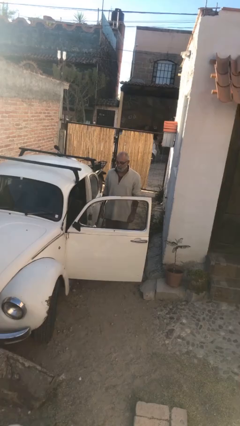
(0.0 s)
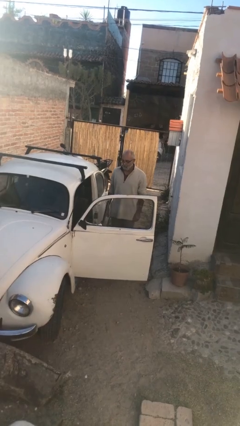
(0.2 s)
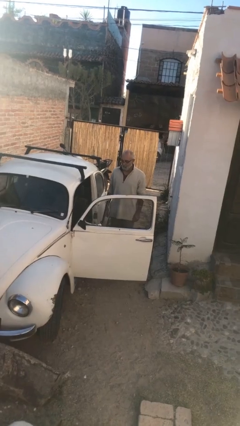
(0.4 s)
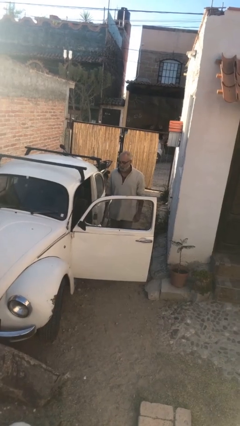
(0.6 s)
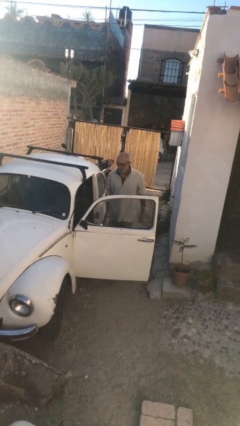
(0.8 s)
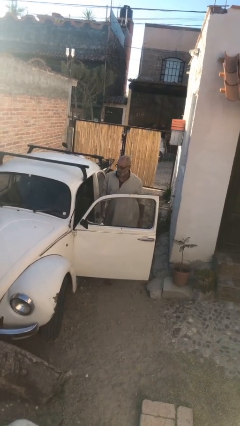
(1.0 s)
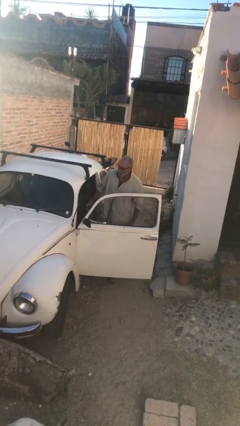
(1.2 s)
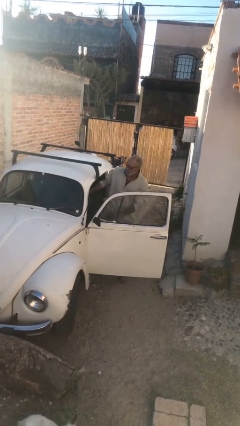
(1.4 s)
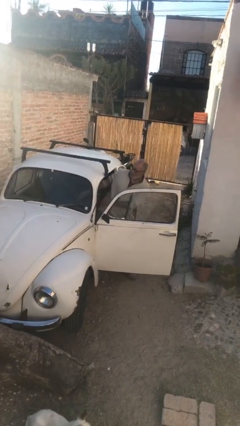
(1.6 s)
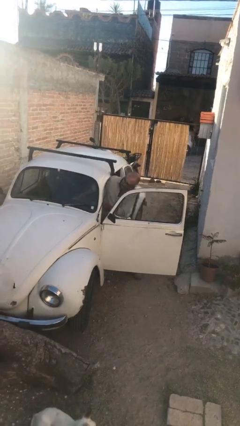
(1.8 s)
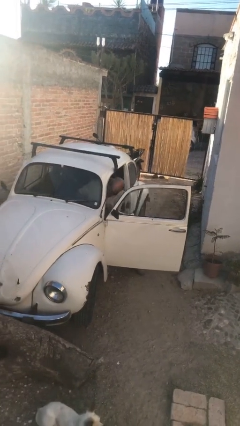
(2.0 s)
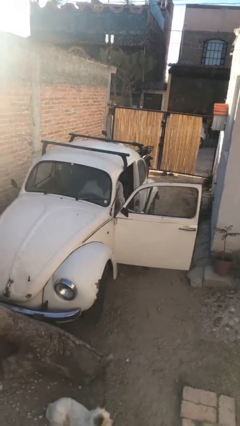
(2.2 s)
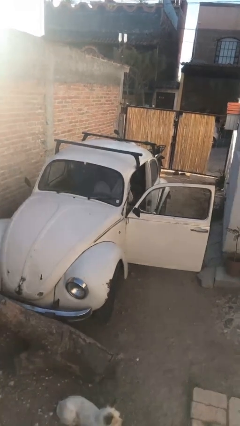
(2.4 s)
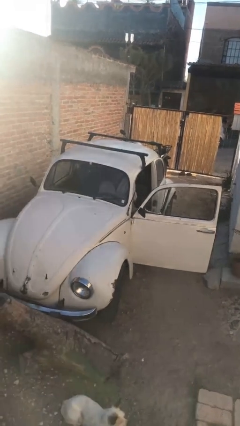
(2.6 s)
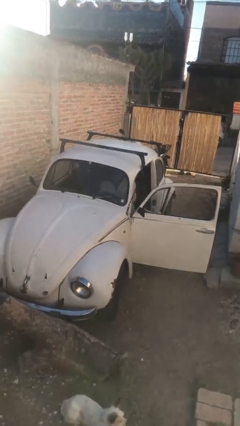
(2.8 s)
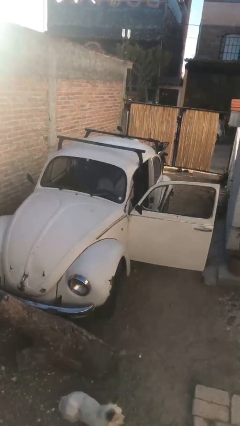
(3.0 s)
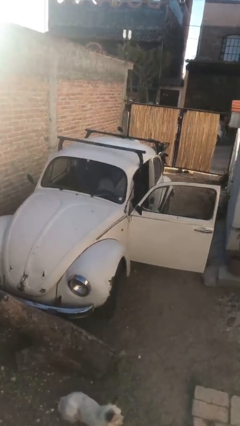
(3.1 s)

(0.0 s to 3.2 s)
person enters car

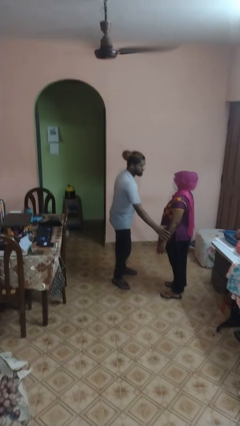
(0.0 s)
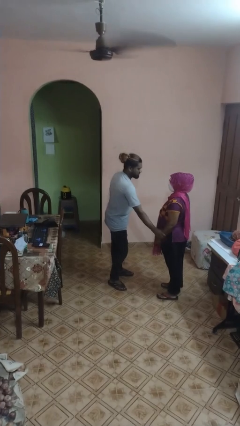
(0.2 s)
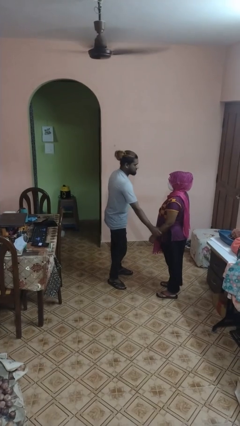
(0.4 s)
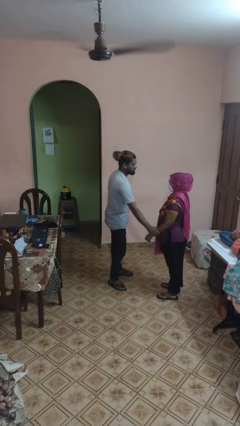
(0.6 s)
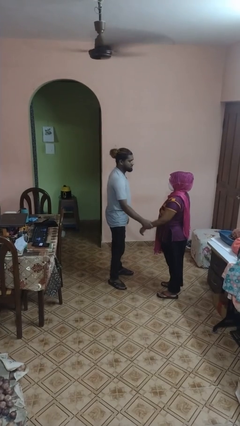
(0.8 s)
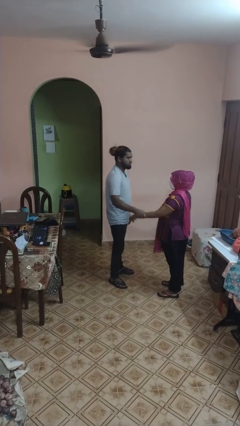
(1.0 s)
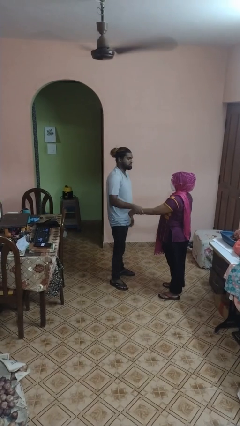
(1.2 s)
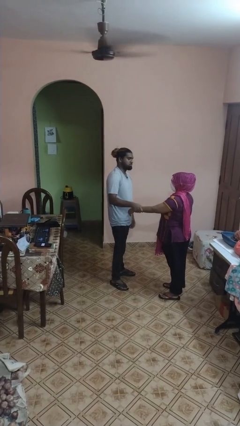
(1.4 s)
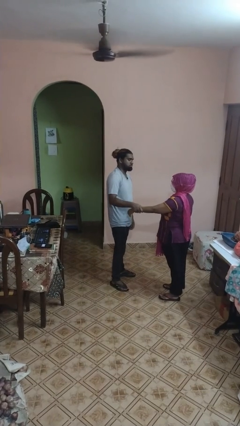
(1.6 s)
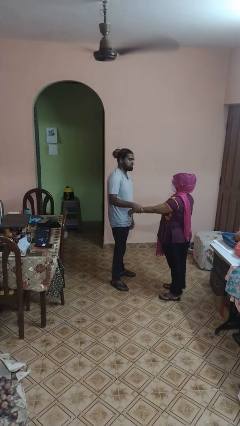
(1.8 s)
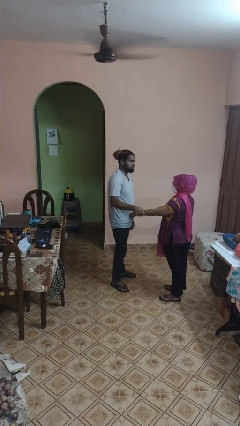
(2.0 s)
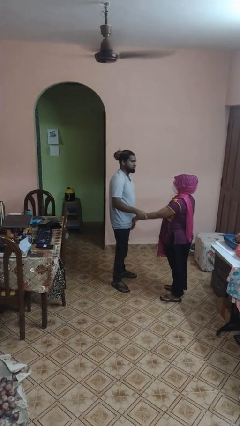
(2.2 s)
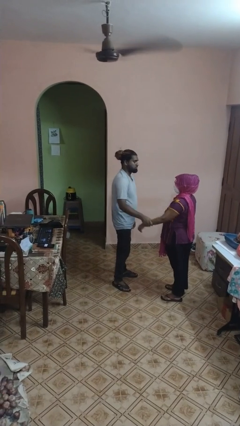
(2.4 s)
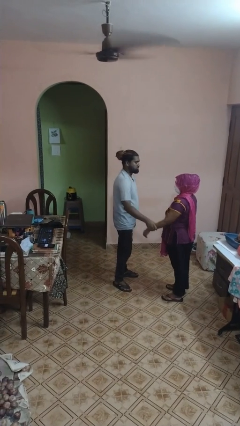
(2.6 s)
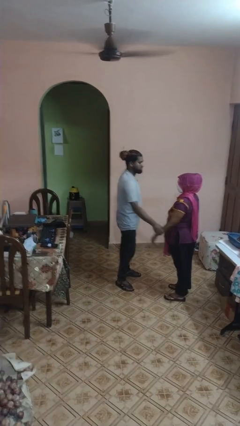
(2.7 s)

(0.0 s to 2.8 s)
person grabs person by forearm

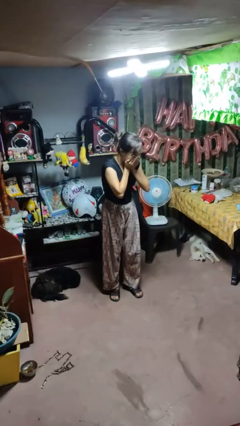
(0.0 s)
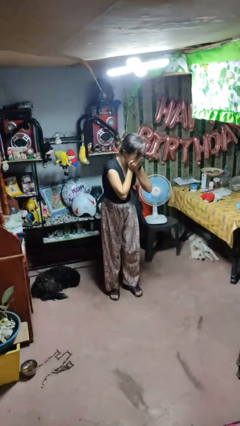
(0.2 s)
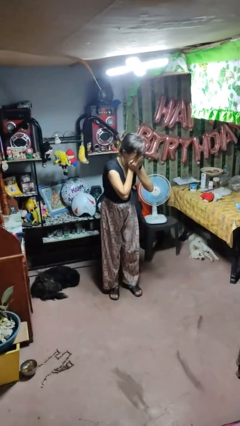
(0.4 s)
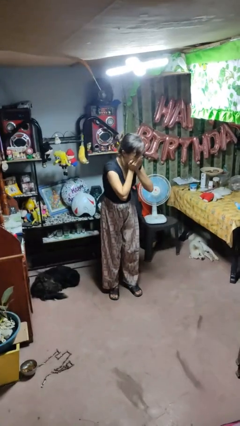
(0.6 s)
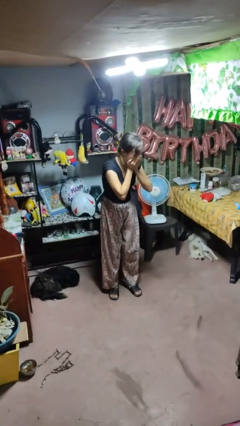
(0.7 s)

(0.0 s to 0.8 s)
person sneezes into hand

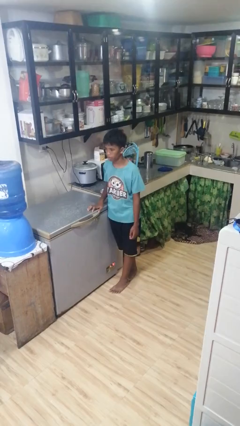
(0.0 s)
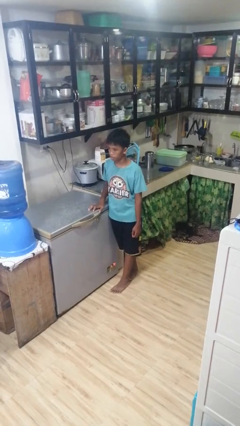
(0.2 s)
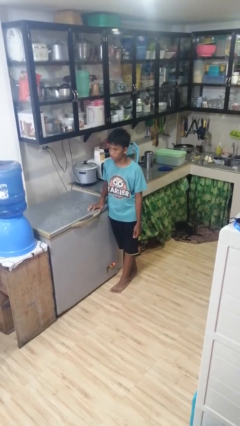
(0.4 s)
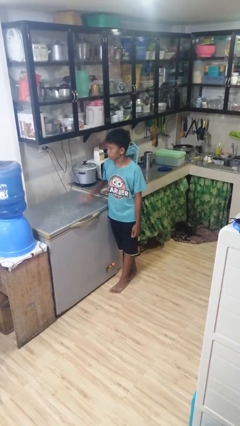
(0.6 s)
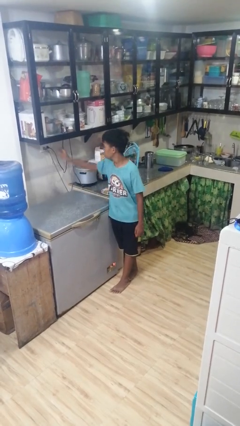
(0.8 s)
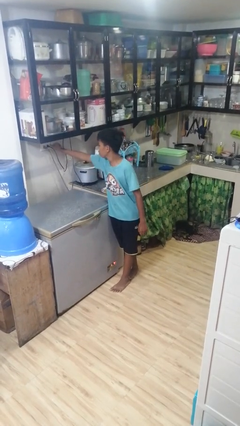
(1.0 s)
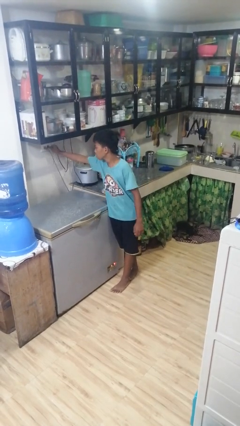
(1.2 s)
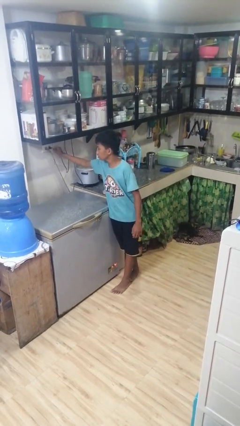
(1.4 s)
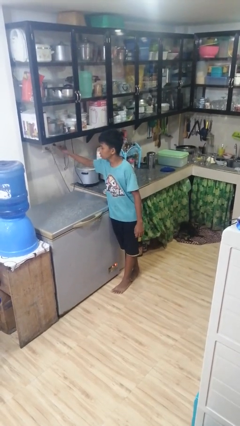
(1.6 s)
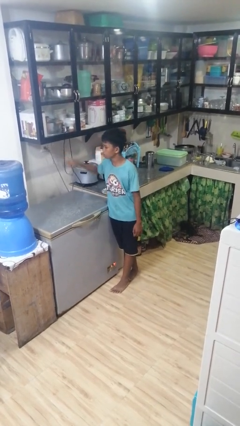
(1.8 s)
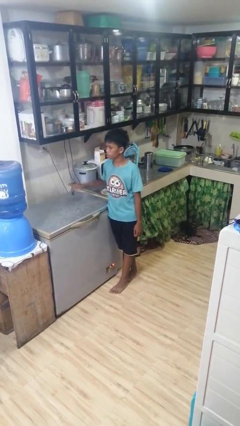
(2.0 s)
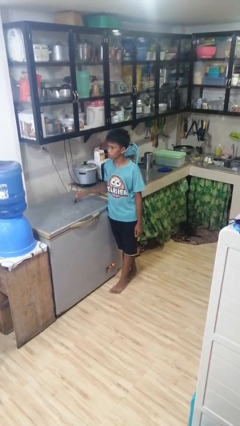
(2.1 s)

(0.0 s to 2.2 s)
person unplugs from electrical socket

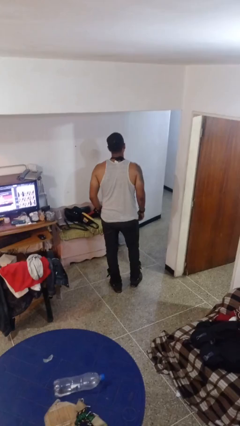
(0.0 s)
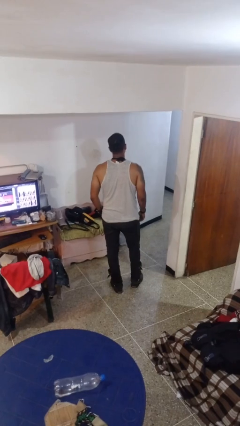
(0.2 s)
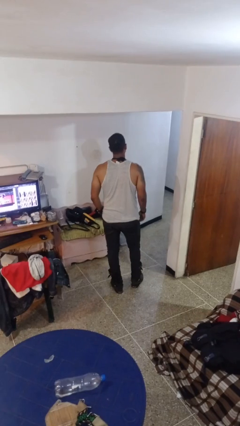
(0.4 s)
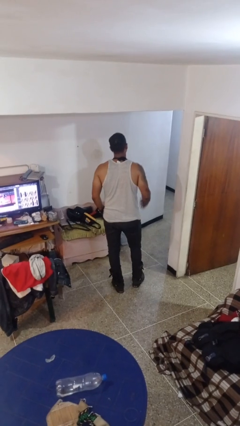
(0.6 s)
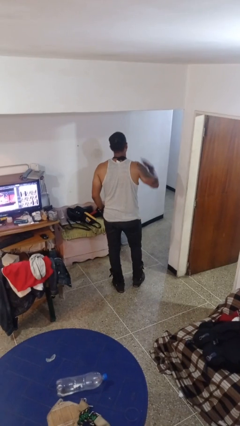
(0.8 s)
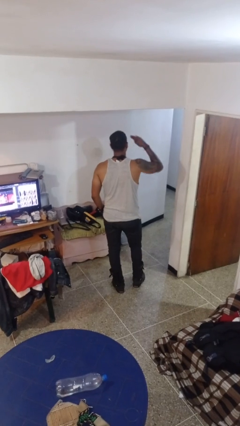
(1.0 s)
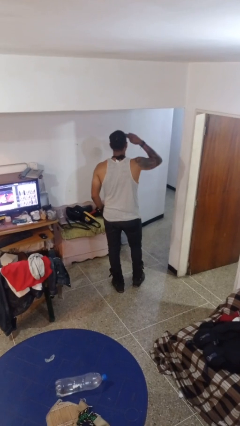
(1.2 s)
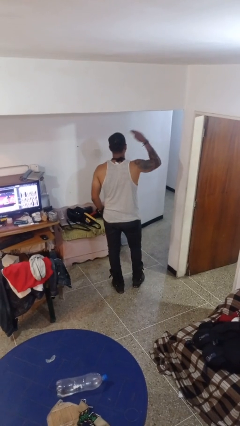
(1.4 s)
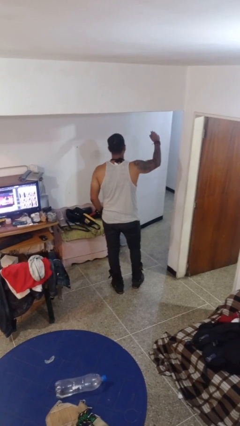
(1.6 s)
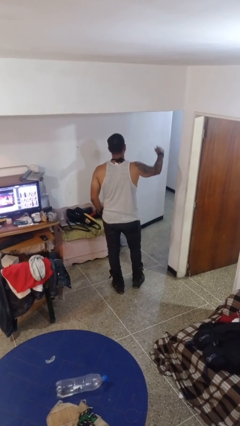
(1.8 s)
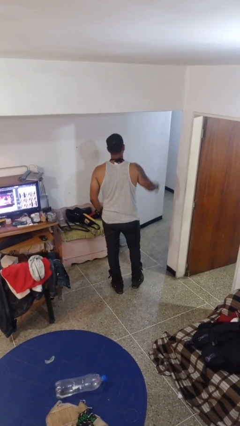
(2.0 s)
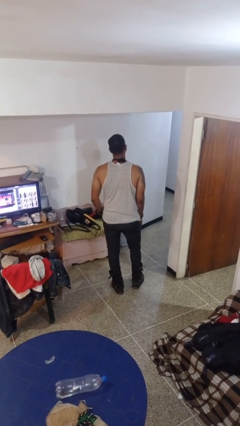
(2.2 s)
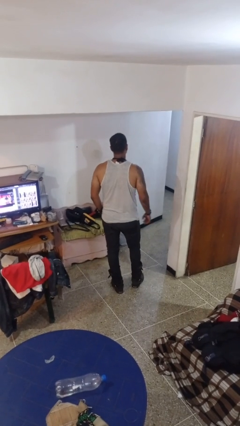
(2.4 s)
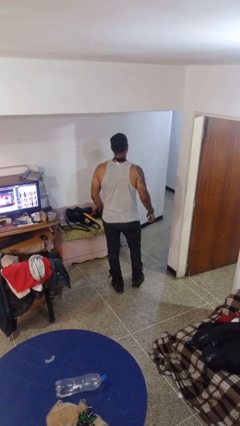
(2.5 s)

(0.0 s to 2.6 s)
person salutes

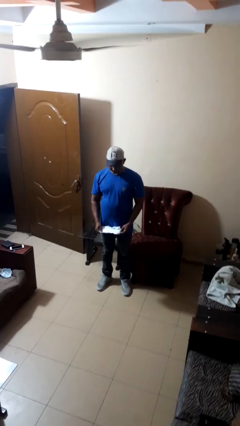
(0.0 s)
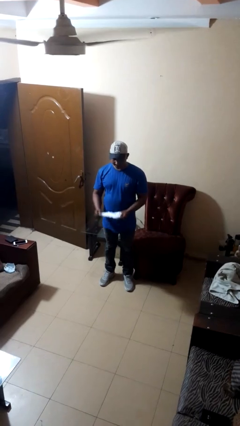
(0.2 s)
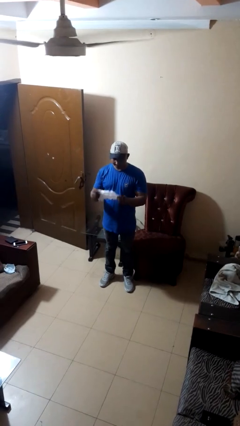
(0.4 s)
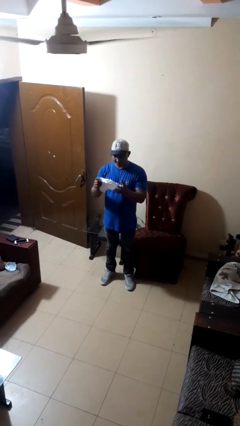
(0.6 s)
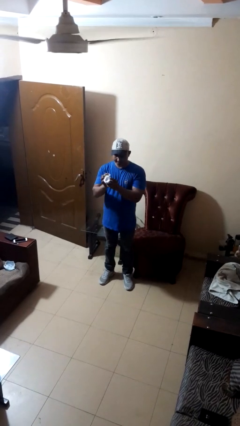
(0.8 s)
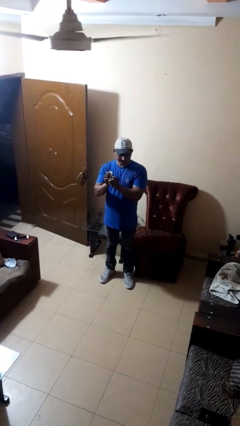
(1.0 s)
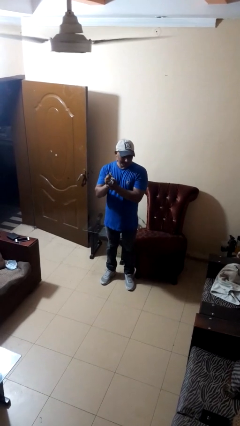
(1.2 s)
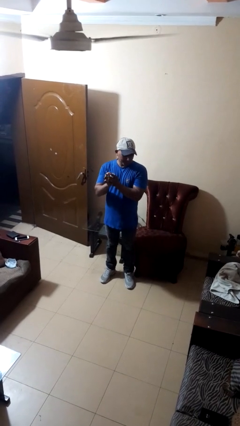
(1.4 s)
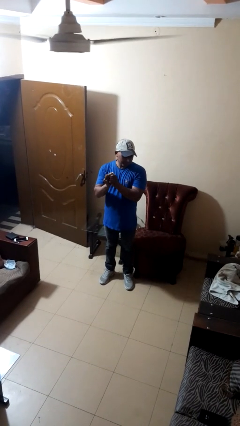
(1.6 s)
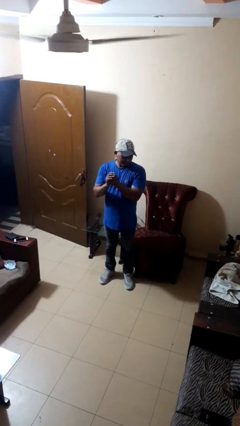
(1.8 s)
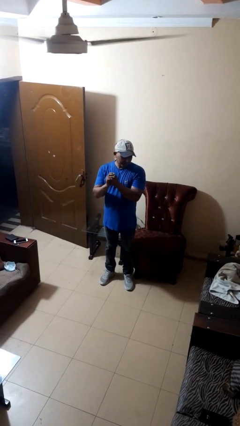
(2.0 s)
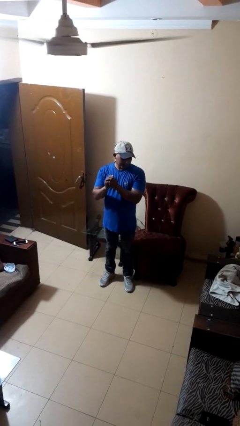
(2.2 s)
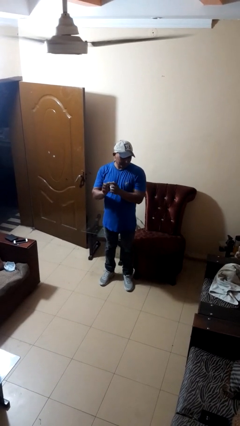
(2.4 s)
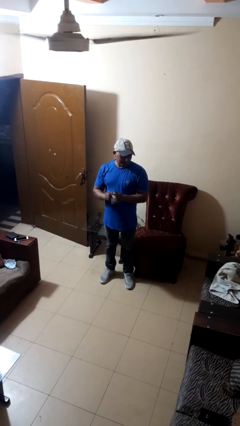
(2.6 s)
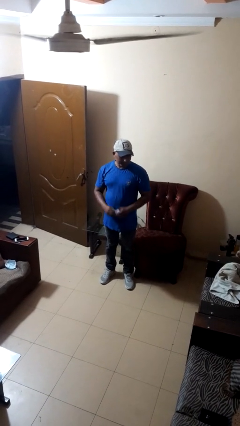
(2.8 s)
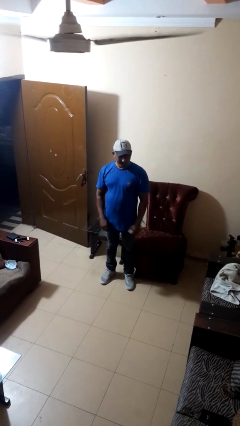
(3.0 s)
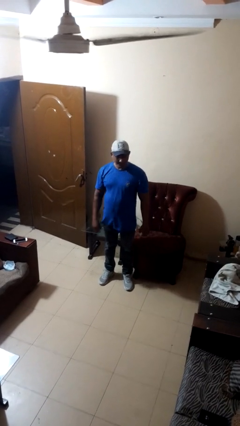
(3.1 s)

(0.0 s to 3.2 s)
person crumples paper

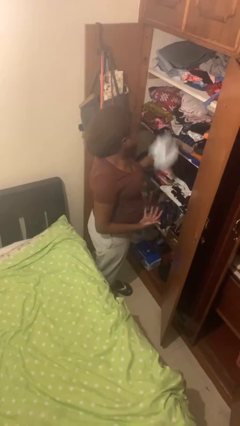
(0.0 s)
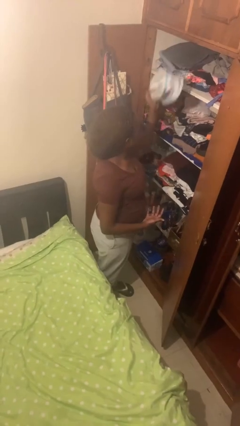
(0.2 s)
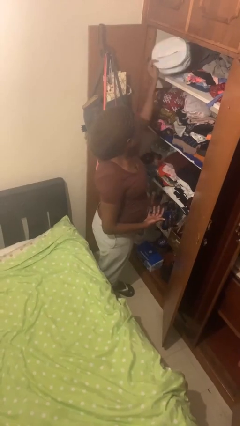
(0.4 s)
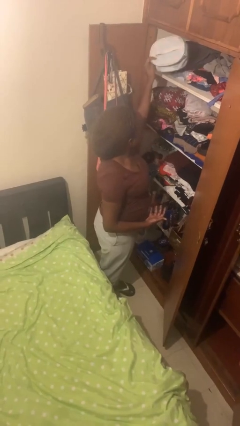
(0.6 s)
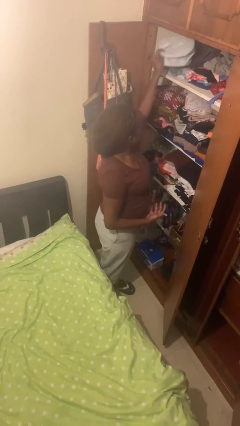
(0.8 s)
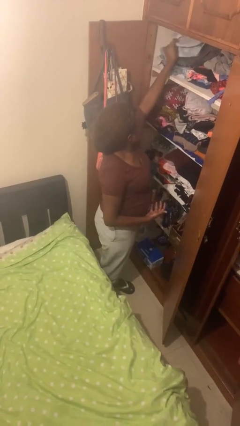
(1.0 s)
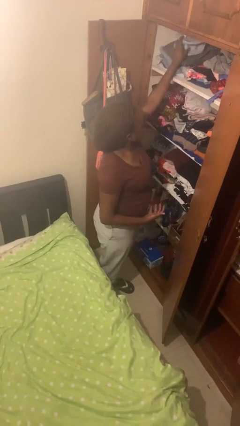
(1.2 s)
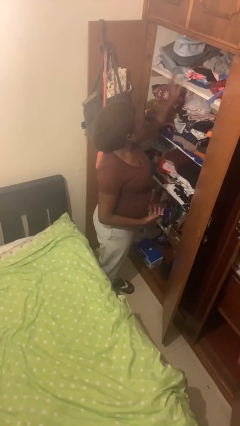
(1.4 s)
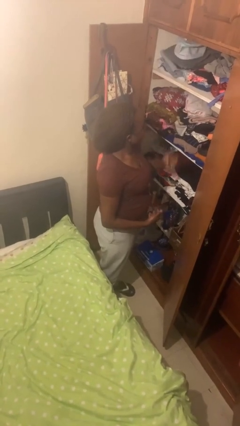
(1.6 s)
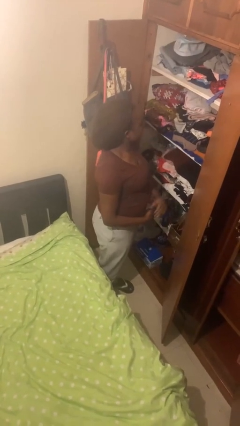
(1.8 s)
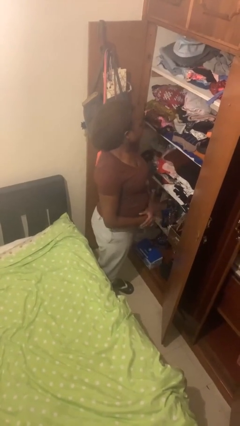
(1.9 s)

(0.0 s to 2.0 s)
person puts down object on shelf
